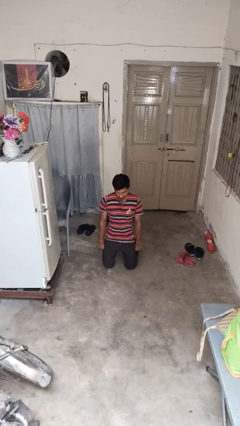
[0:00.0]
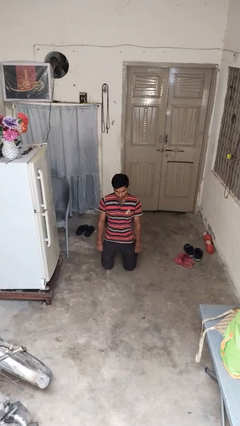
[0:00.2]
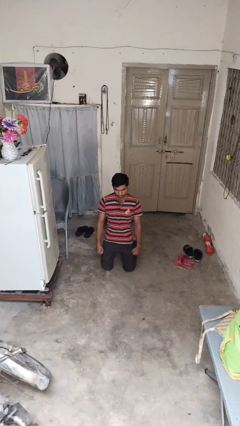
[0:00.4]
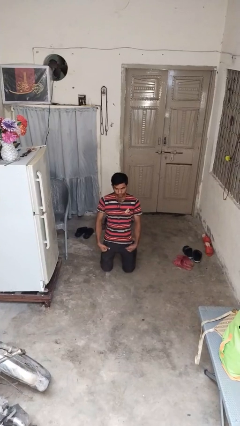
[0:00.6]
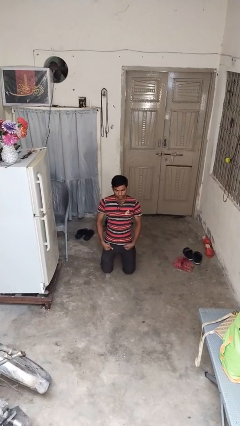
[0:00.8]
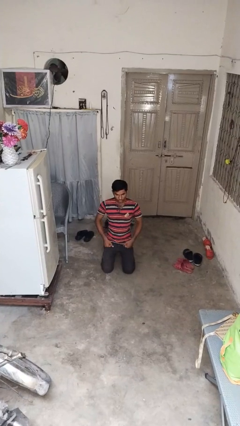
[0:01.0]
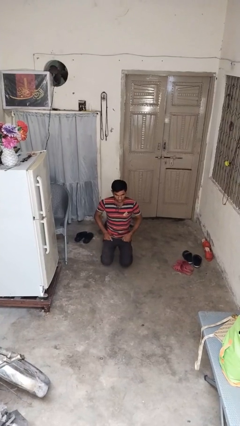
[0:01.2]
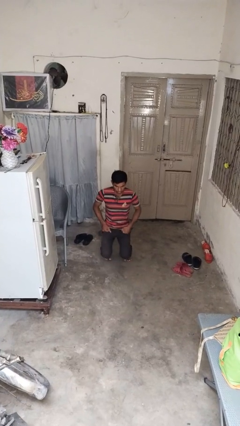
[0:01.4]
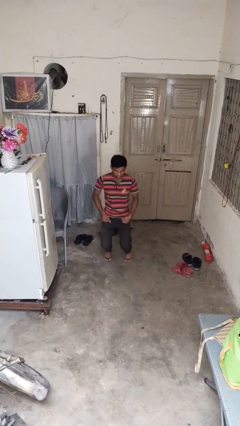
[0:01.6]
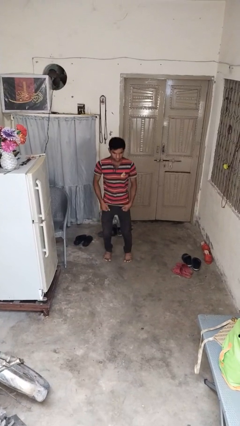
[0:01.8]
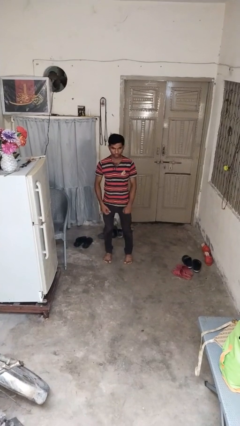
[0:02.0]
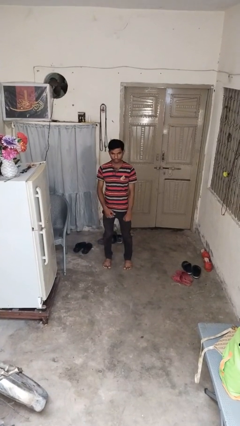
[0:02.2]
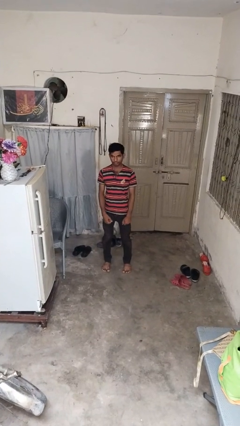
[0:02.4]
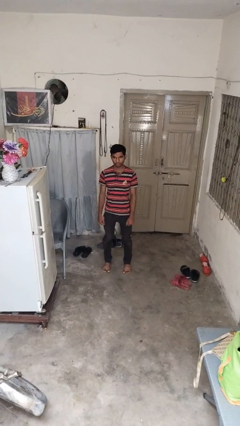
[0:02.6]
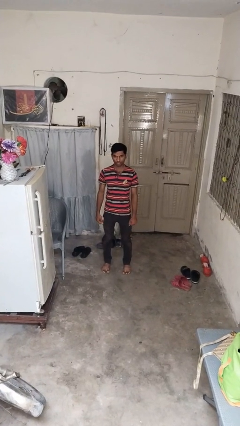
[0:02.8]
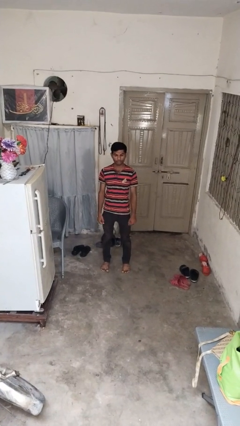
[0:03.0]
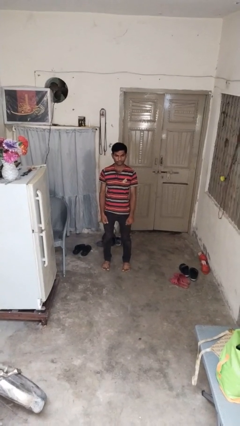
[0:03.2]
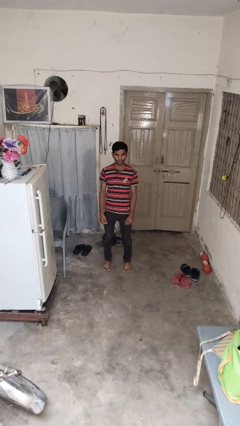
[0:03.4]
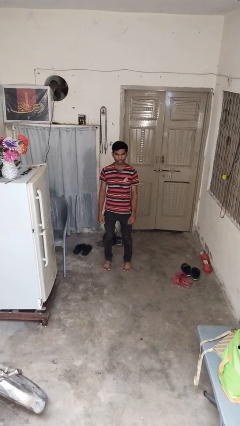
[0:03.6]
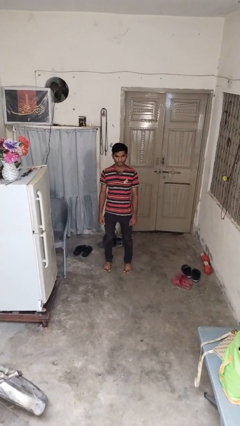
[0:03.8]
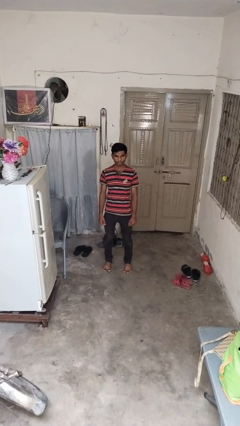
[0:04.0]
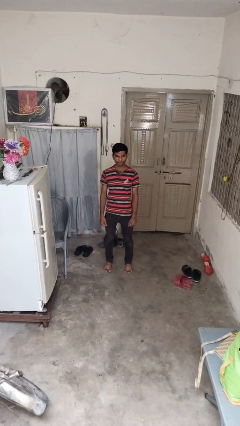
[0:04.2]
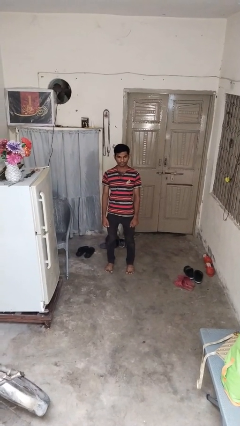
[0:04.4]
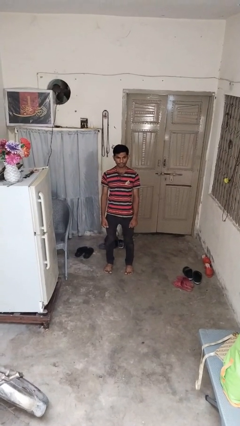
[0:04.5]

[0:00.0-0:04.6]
person stands up from floor

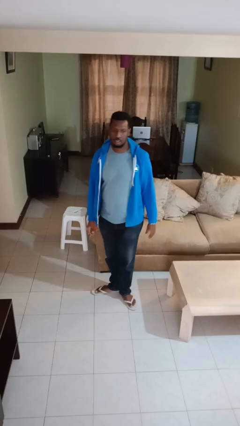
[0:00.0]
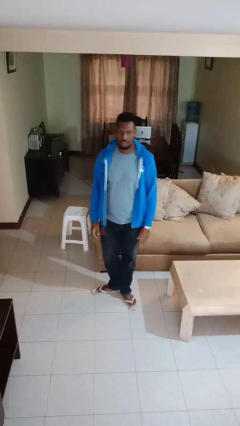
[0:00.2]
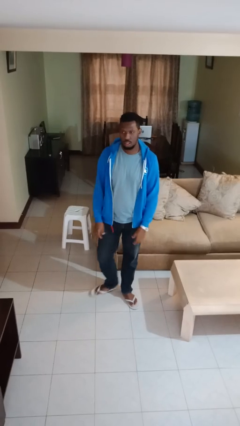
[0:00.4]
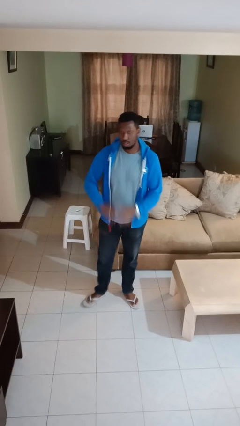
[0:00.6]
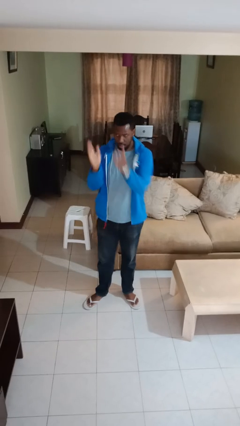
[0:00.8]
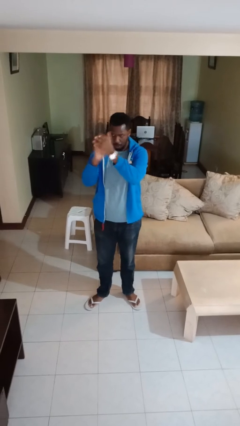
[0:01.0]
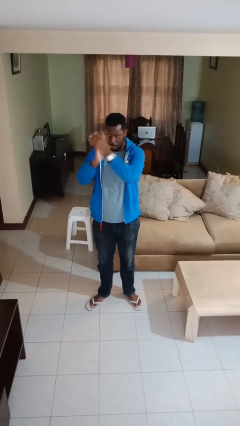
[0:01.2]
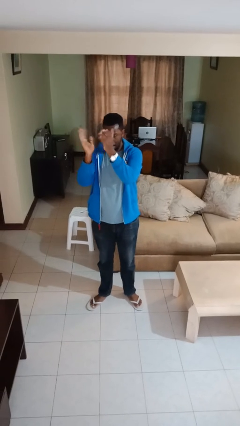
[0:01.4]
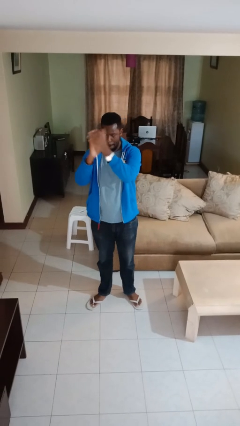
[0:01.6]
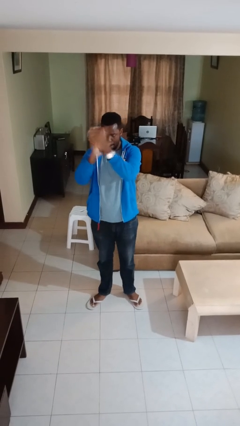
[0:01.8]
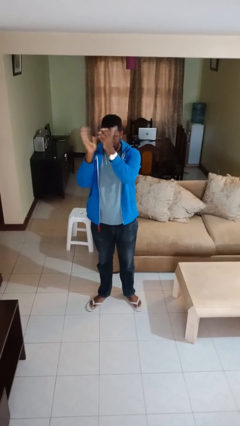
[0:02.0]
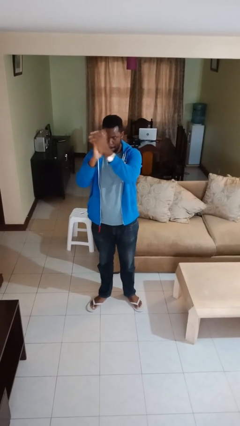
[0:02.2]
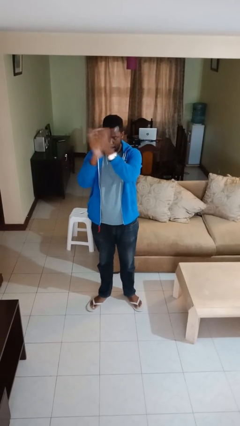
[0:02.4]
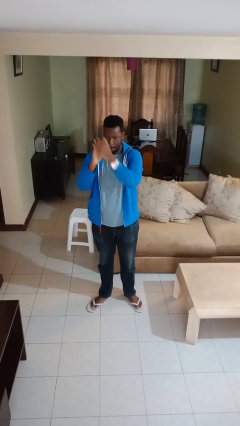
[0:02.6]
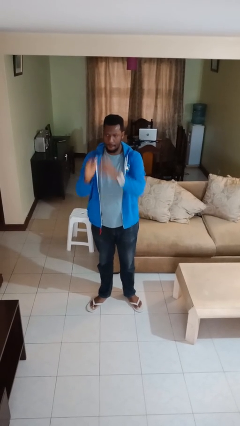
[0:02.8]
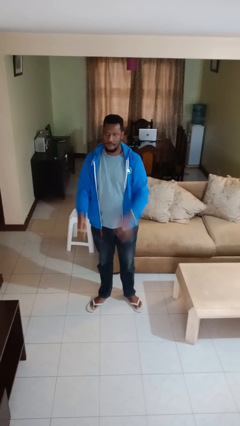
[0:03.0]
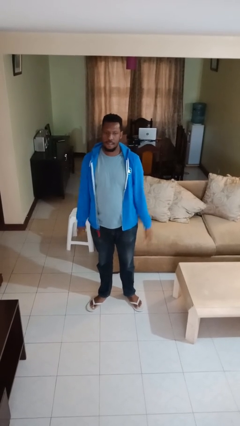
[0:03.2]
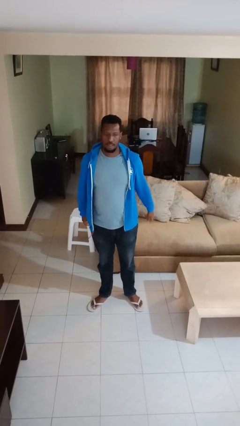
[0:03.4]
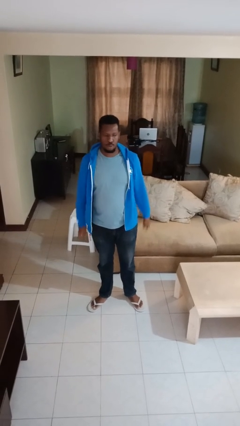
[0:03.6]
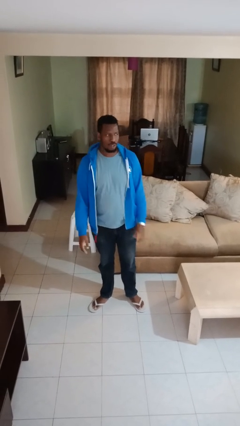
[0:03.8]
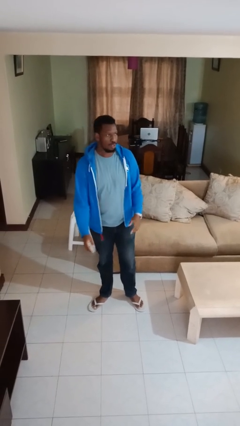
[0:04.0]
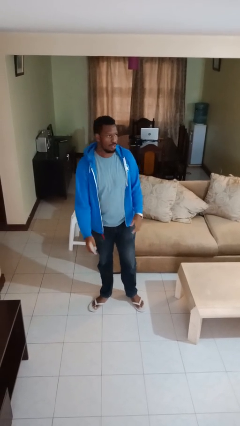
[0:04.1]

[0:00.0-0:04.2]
person claps hands

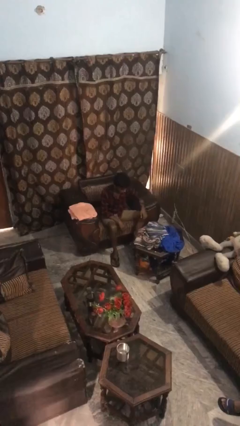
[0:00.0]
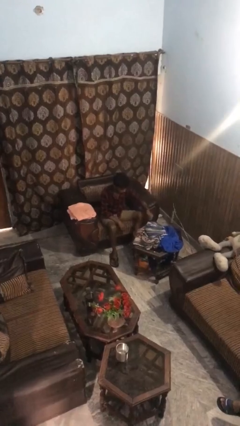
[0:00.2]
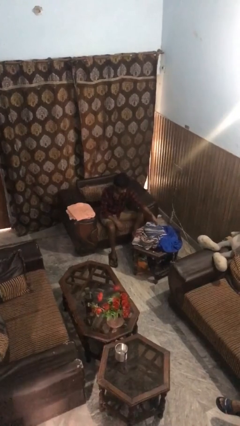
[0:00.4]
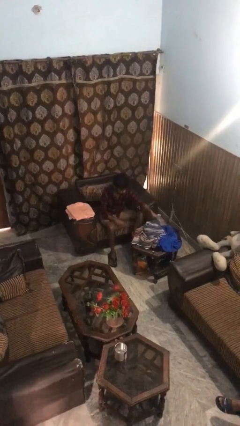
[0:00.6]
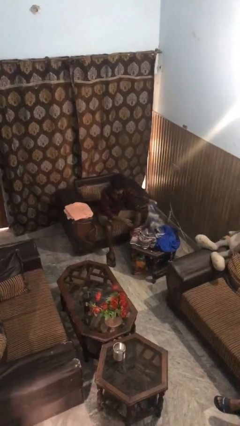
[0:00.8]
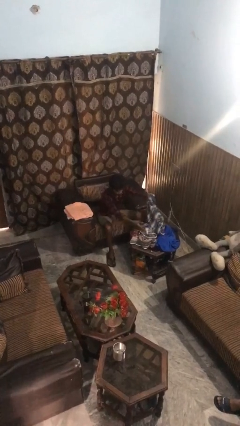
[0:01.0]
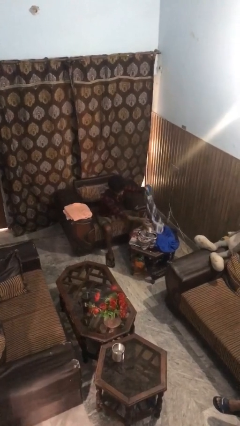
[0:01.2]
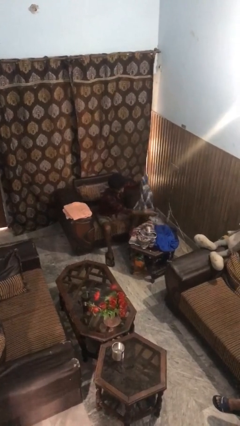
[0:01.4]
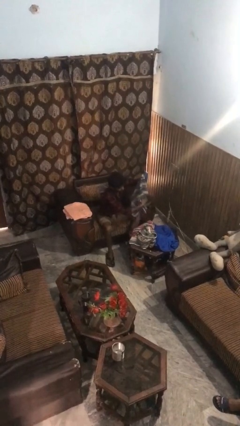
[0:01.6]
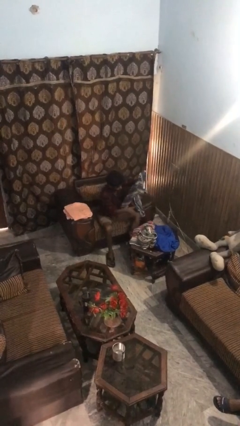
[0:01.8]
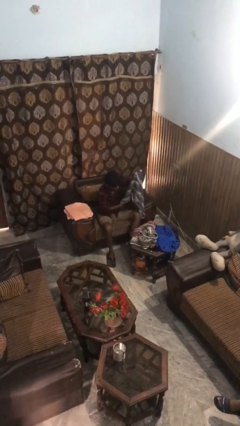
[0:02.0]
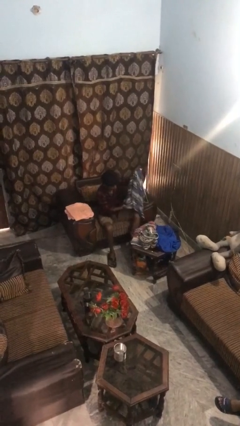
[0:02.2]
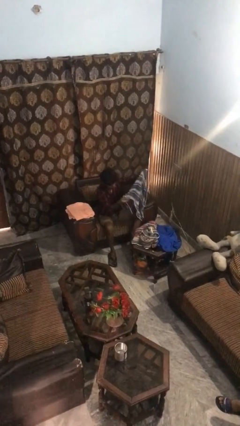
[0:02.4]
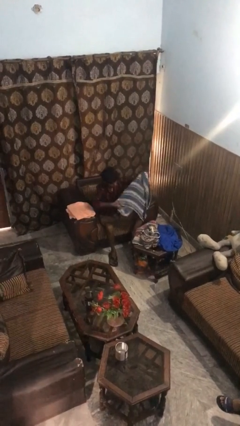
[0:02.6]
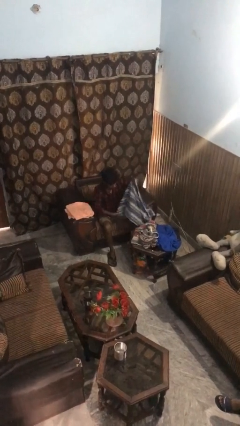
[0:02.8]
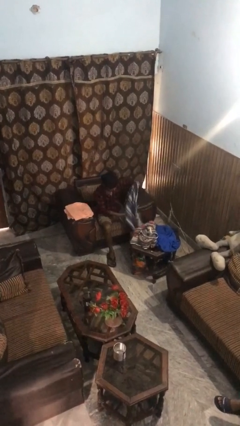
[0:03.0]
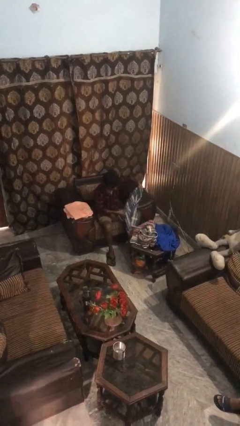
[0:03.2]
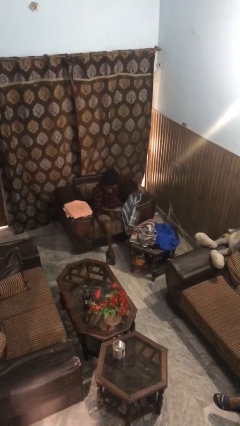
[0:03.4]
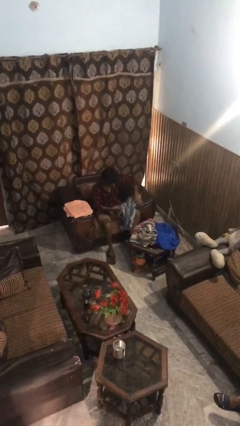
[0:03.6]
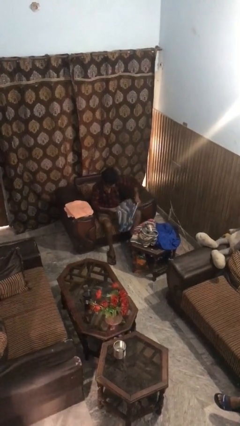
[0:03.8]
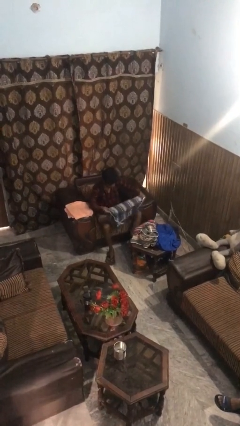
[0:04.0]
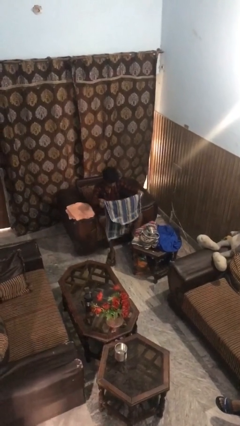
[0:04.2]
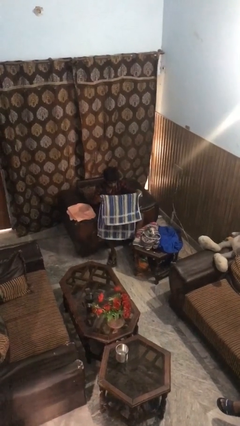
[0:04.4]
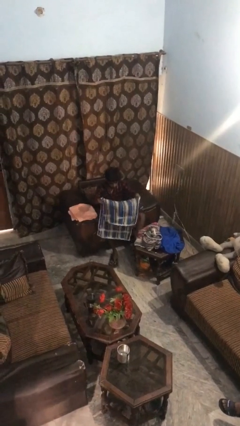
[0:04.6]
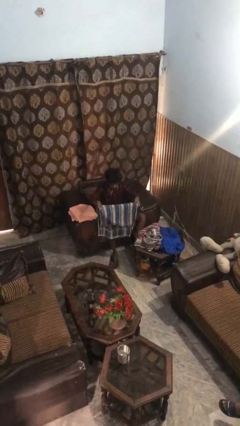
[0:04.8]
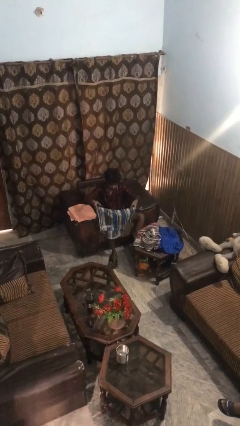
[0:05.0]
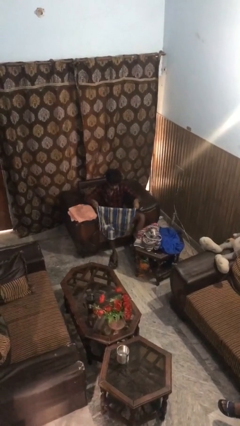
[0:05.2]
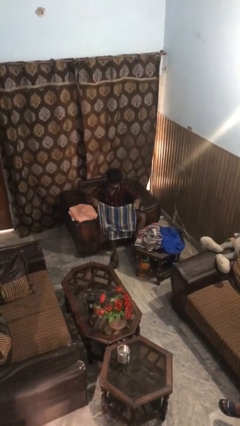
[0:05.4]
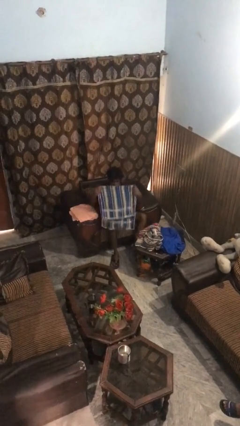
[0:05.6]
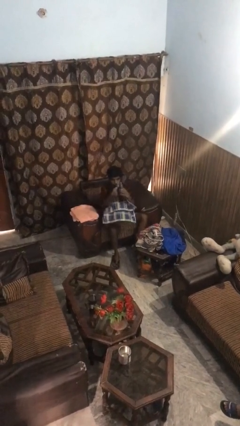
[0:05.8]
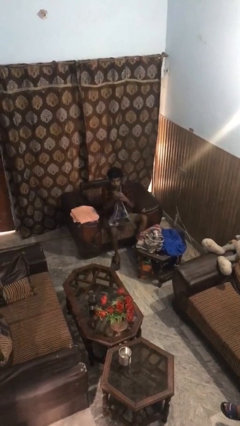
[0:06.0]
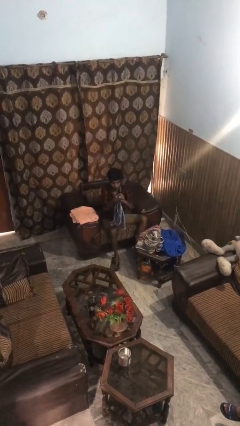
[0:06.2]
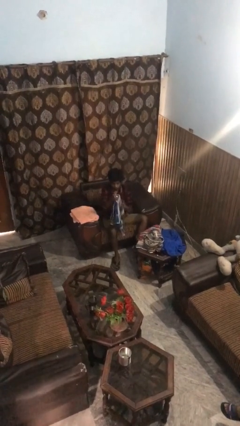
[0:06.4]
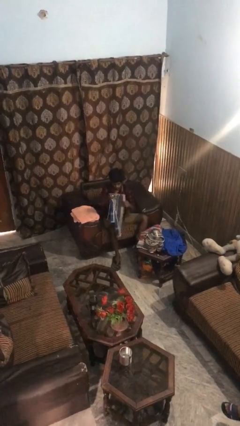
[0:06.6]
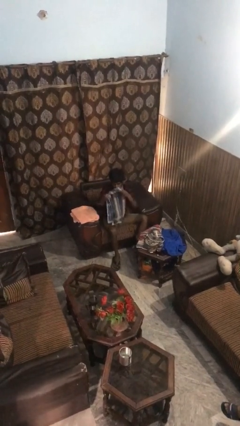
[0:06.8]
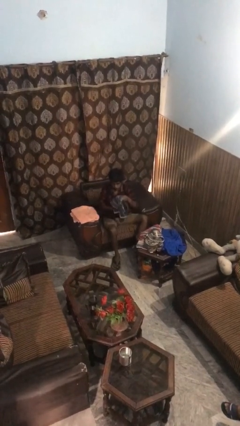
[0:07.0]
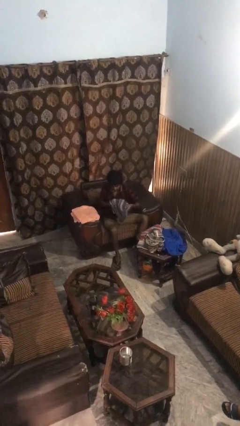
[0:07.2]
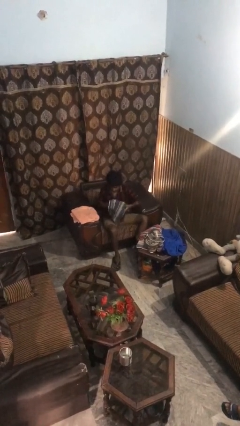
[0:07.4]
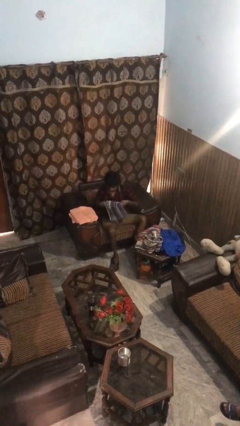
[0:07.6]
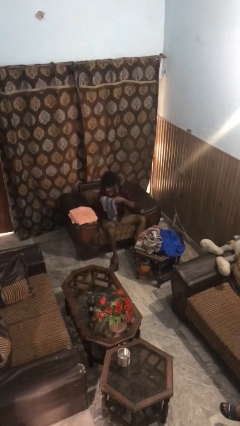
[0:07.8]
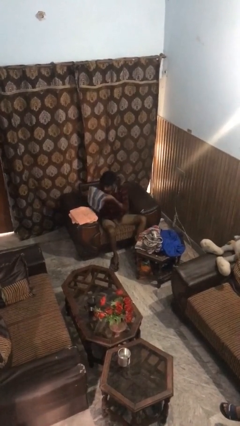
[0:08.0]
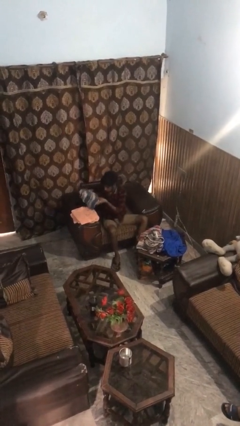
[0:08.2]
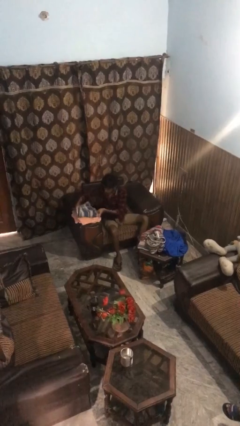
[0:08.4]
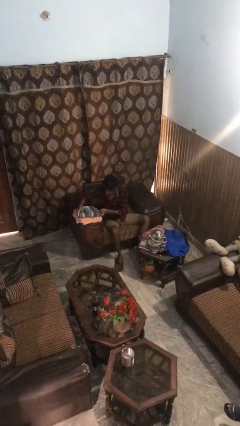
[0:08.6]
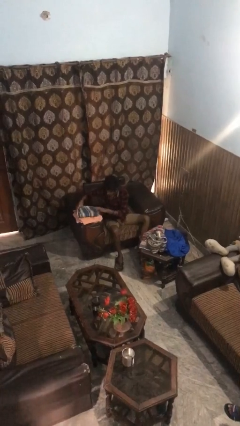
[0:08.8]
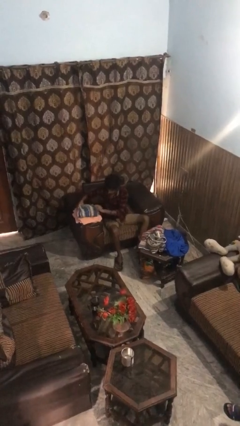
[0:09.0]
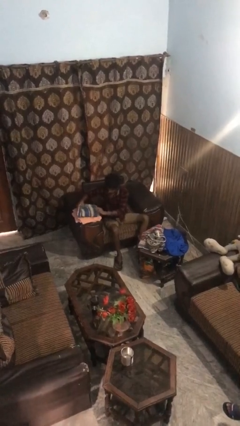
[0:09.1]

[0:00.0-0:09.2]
person folds towel
